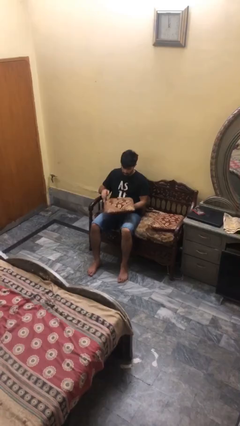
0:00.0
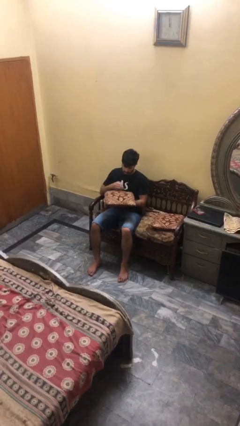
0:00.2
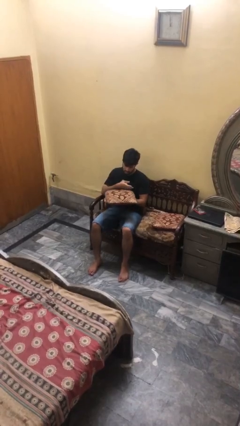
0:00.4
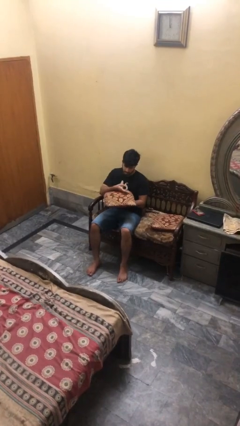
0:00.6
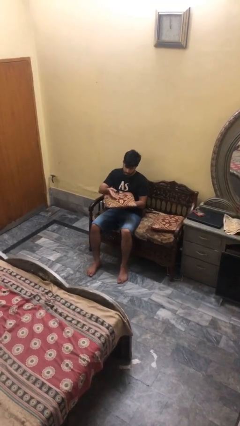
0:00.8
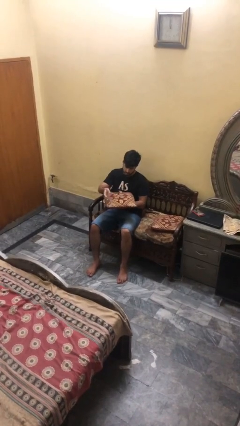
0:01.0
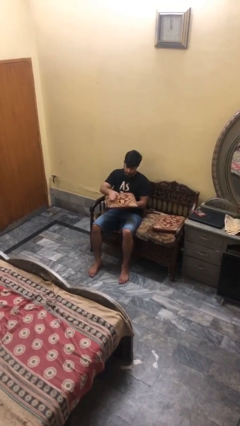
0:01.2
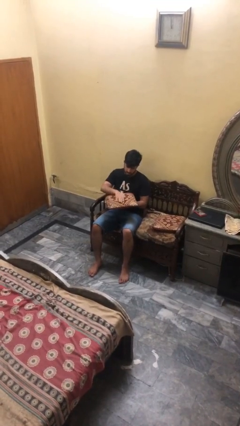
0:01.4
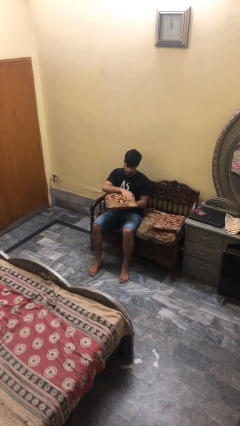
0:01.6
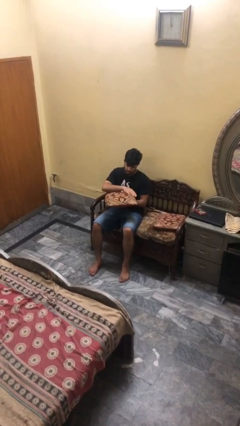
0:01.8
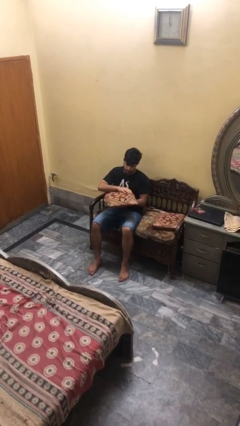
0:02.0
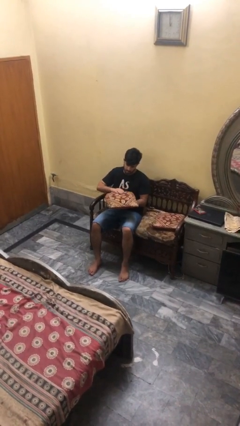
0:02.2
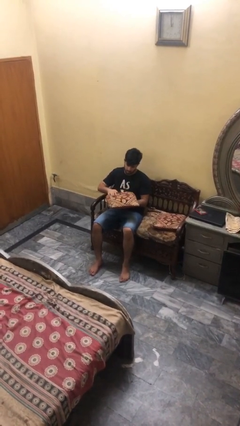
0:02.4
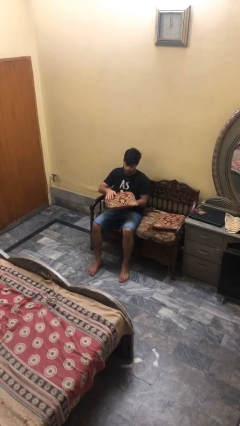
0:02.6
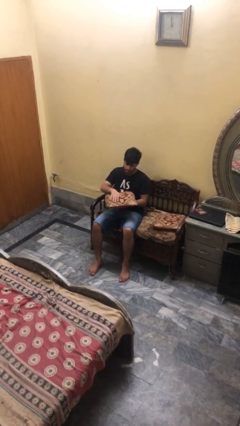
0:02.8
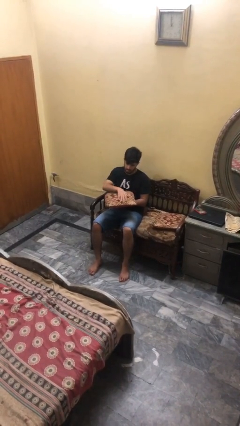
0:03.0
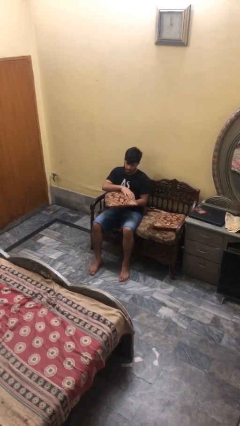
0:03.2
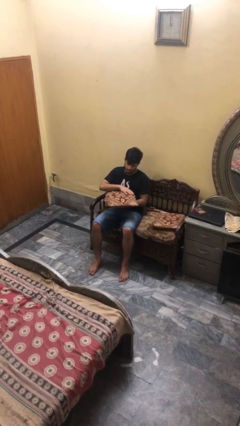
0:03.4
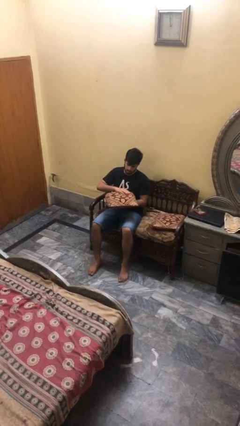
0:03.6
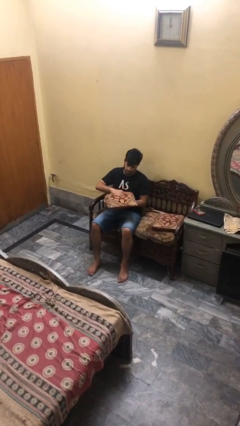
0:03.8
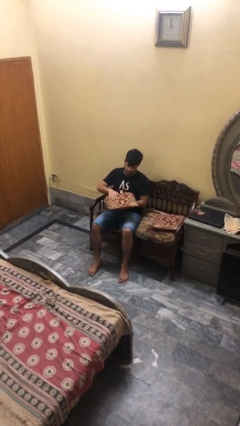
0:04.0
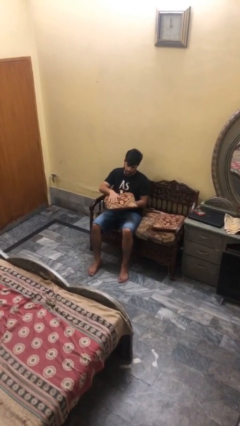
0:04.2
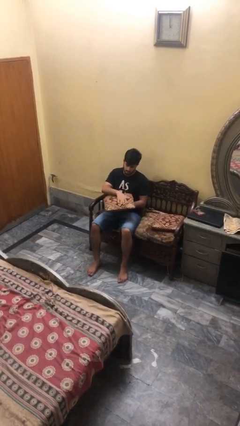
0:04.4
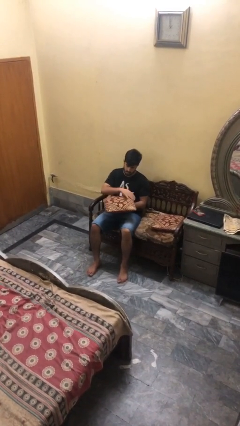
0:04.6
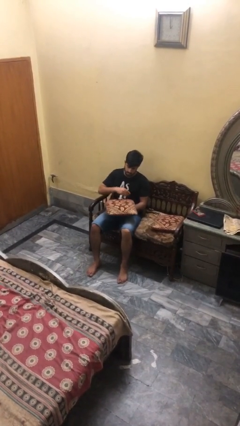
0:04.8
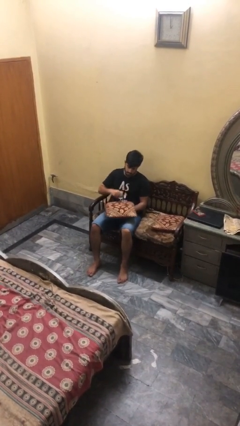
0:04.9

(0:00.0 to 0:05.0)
person waves hand over object

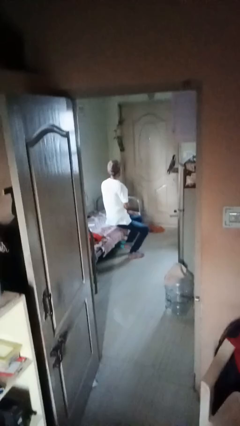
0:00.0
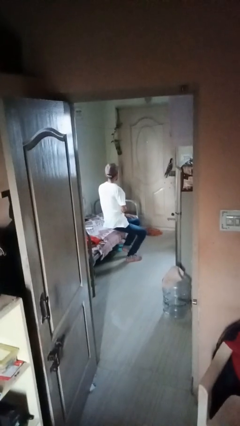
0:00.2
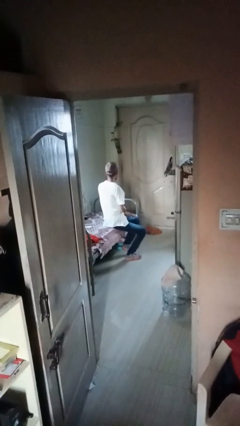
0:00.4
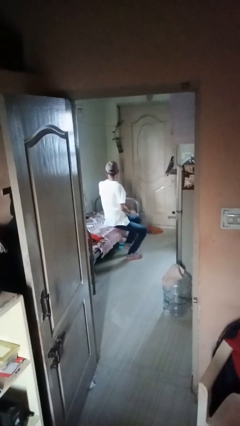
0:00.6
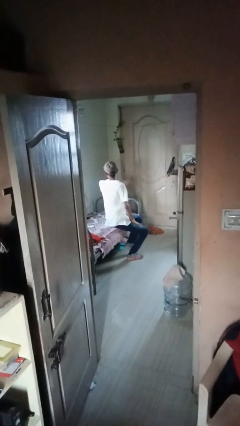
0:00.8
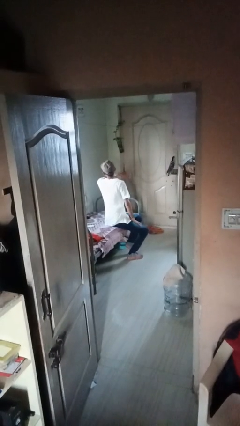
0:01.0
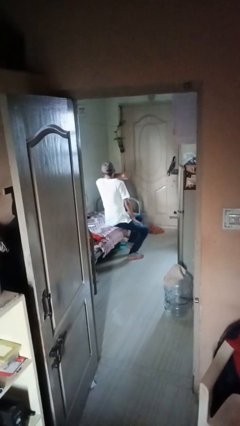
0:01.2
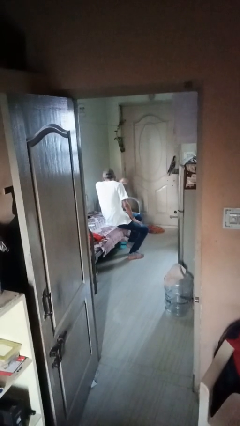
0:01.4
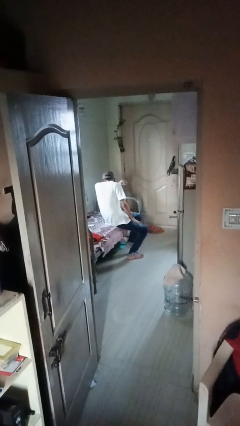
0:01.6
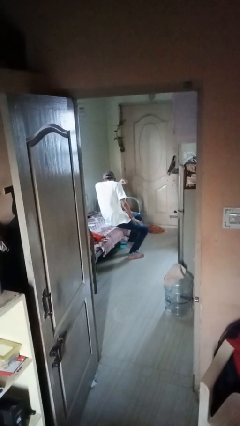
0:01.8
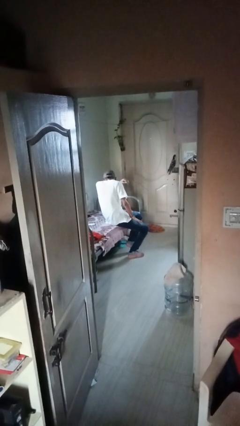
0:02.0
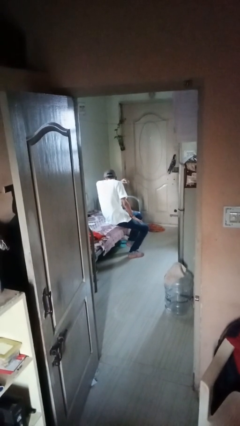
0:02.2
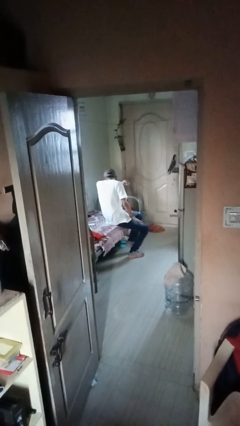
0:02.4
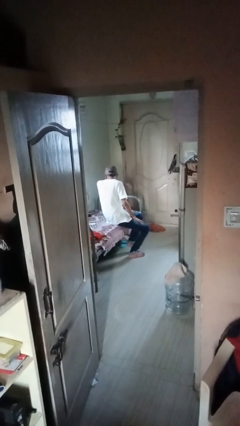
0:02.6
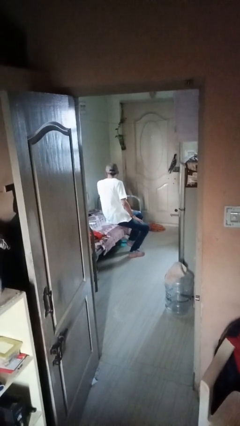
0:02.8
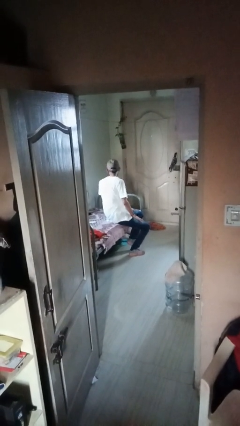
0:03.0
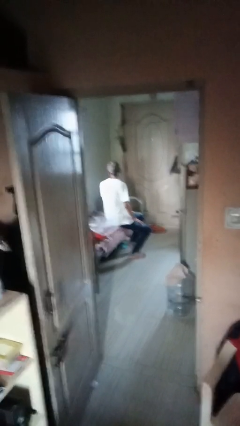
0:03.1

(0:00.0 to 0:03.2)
person sneezes into arm

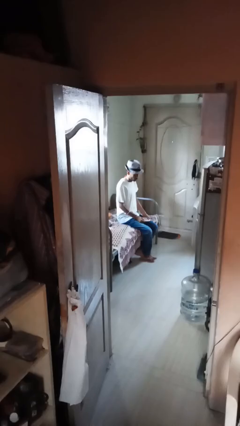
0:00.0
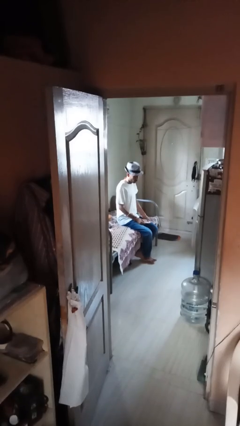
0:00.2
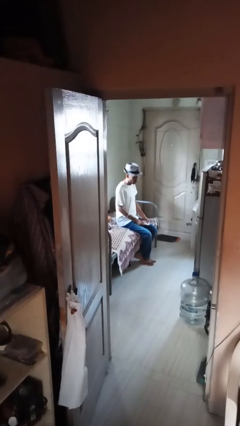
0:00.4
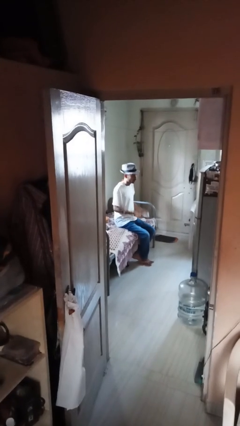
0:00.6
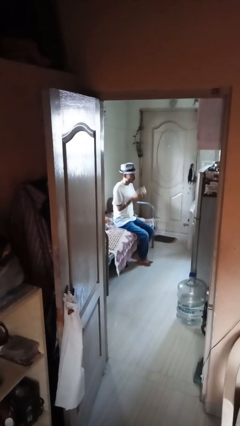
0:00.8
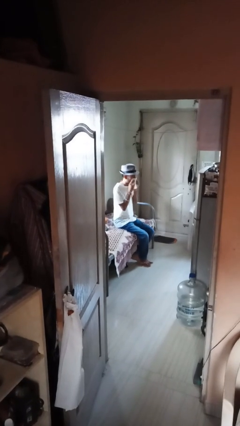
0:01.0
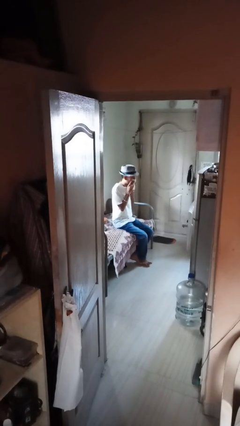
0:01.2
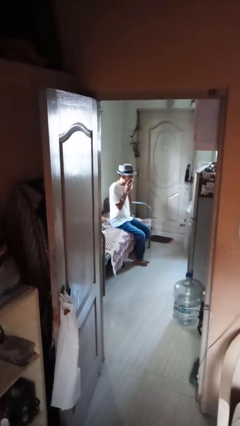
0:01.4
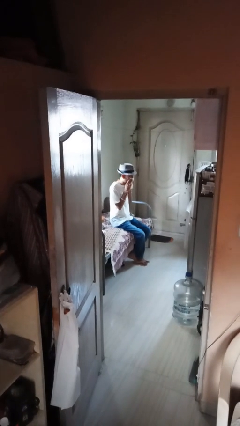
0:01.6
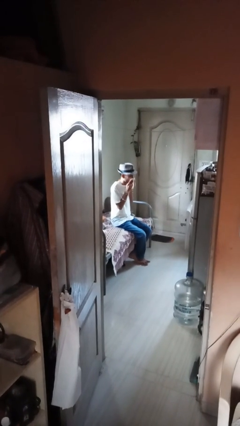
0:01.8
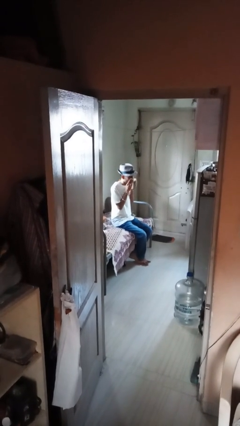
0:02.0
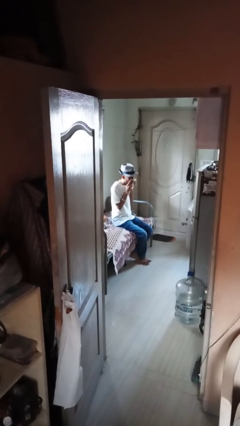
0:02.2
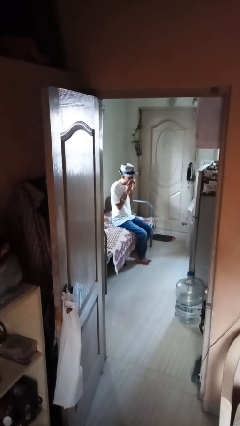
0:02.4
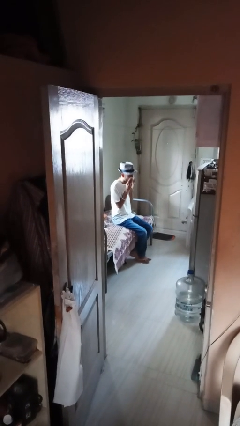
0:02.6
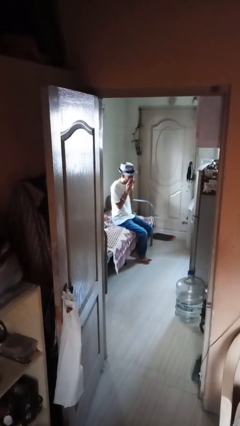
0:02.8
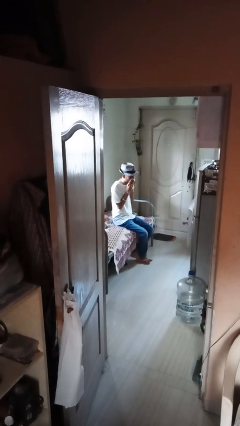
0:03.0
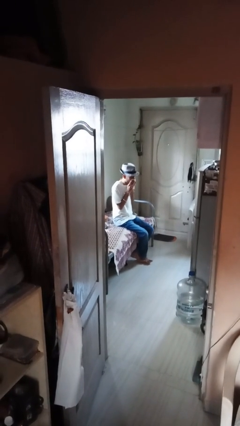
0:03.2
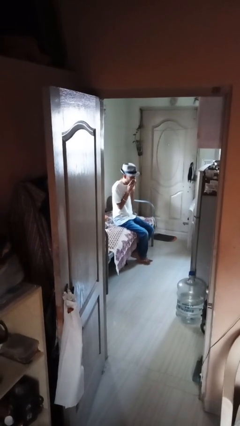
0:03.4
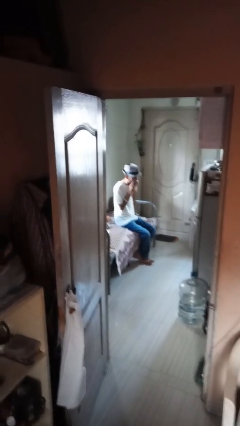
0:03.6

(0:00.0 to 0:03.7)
person blows nose

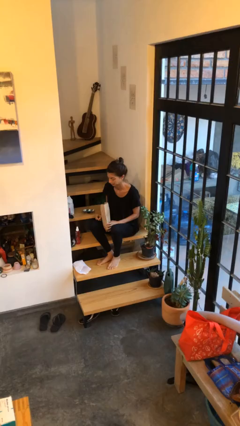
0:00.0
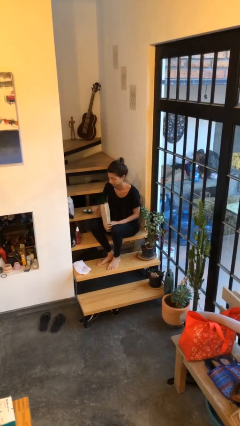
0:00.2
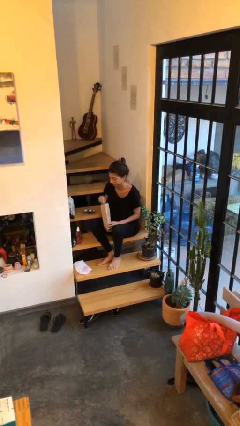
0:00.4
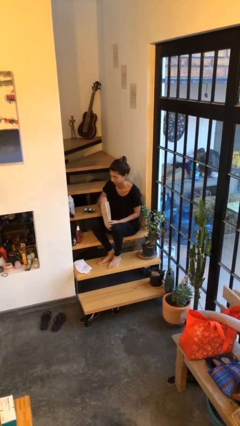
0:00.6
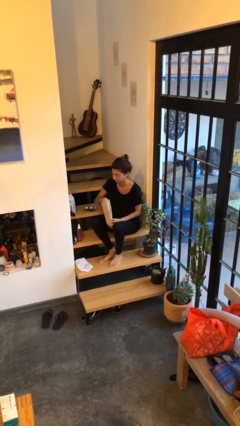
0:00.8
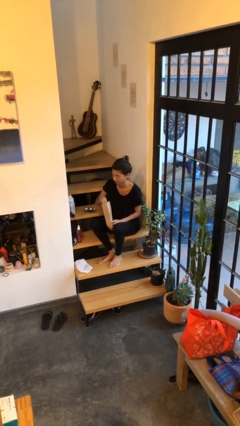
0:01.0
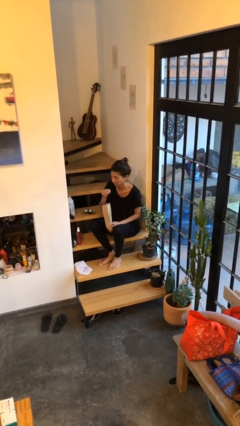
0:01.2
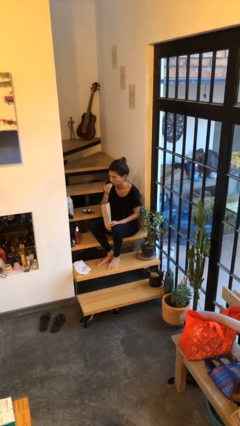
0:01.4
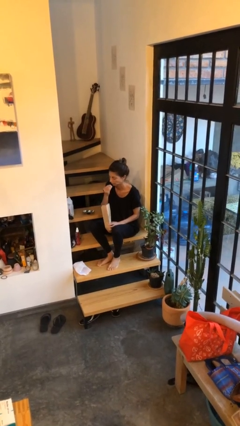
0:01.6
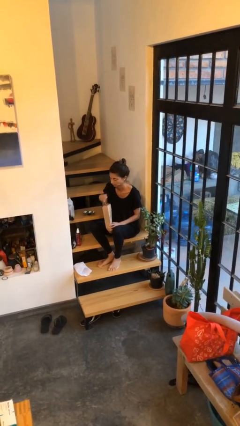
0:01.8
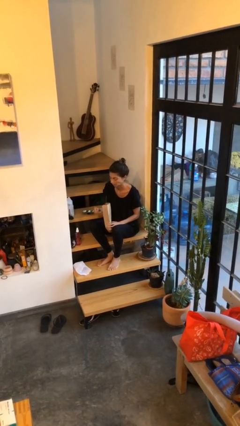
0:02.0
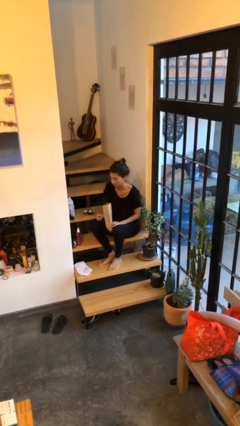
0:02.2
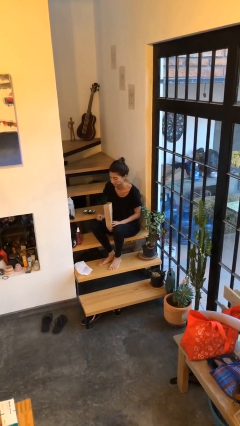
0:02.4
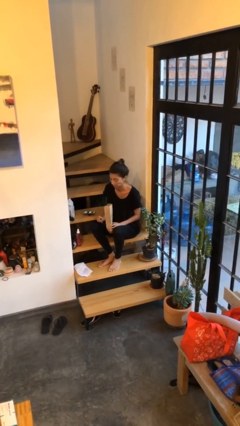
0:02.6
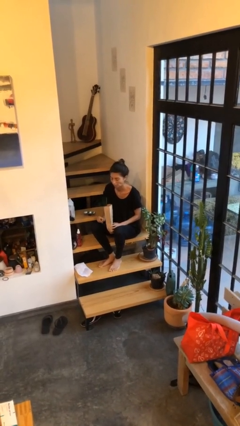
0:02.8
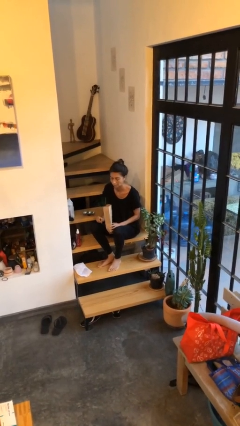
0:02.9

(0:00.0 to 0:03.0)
person eats snack from bag

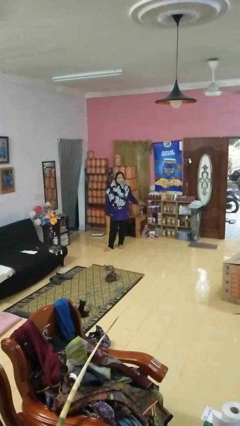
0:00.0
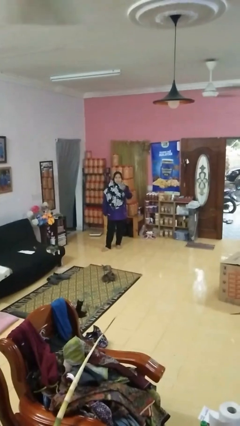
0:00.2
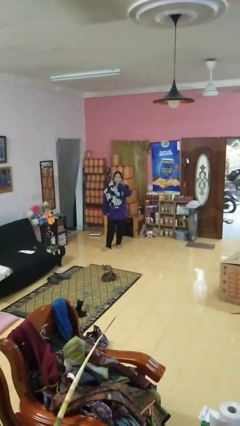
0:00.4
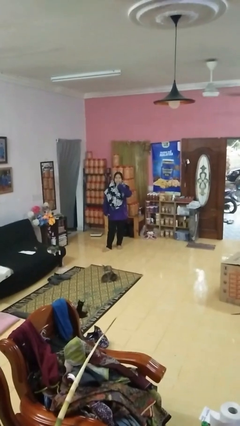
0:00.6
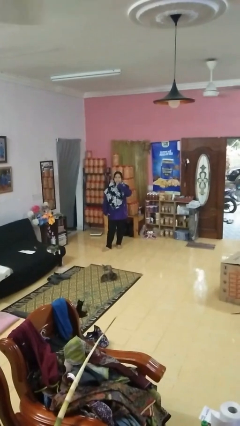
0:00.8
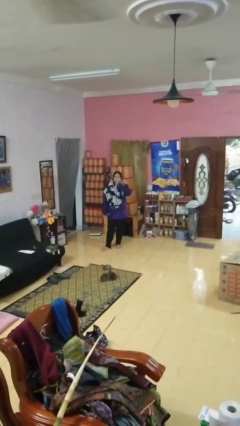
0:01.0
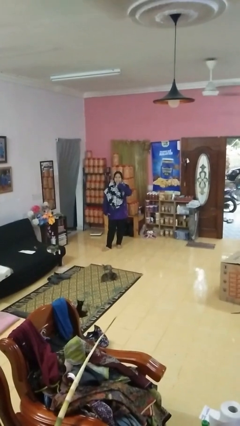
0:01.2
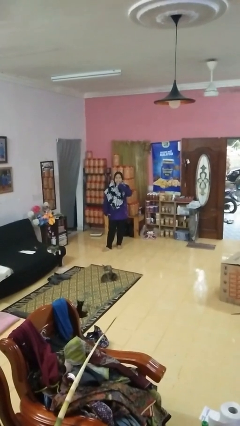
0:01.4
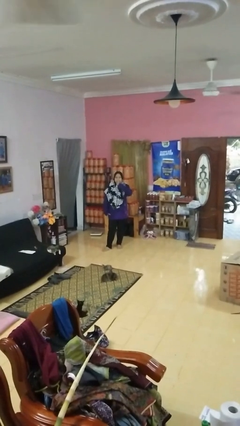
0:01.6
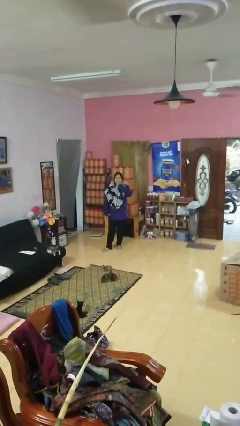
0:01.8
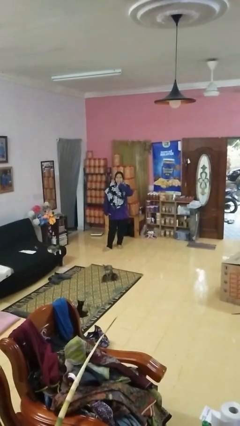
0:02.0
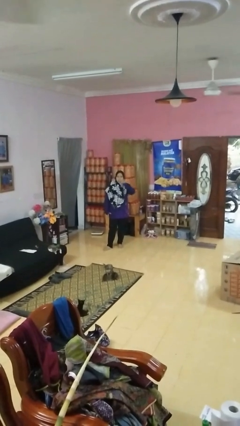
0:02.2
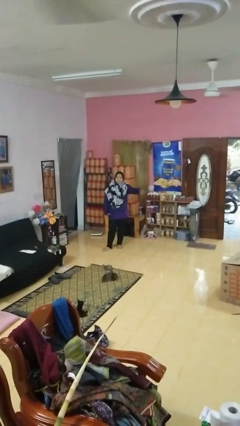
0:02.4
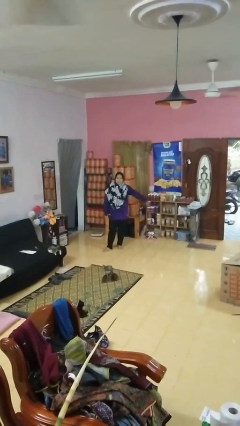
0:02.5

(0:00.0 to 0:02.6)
person gestures be quiet

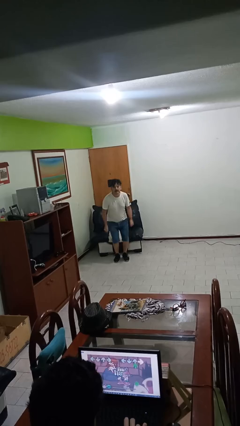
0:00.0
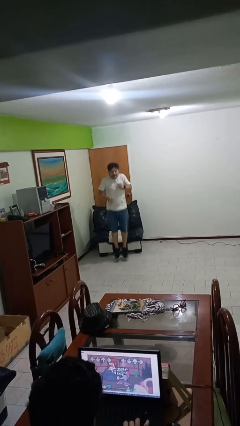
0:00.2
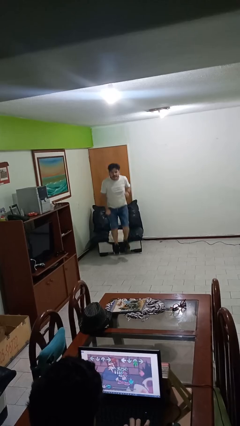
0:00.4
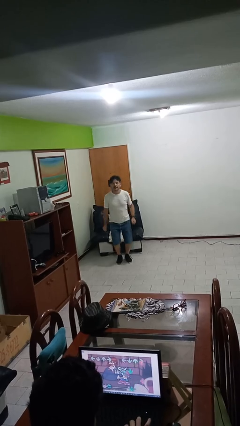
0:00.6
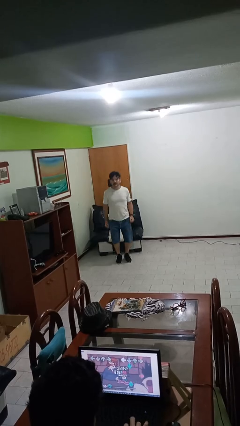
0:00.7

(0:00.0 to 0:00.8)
person jumps
